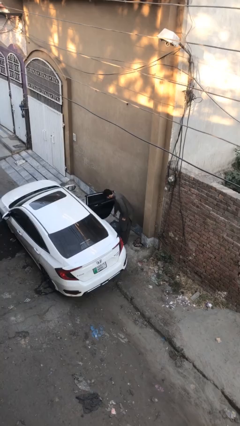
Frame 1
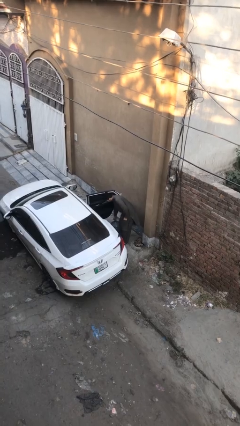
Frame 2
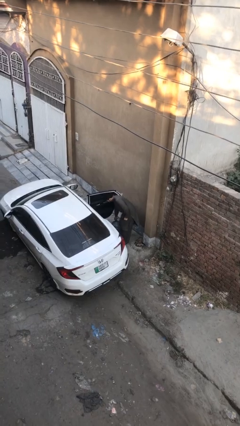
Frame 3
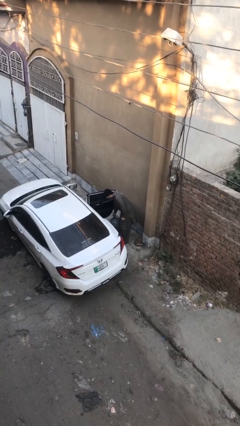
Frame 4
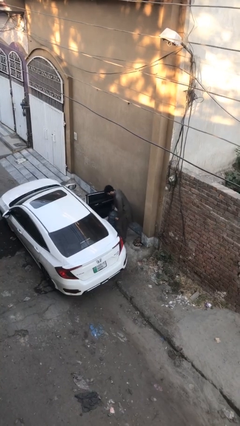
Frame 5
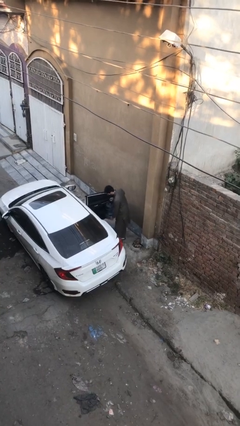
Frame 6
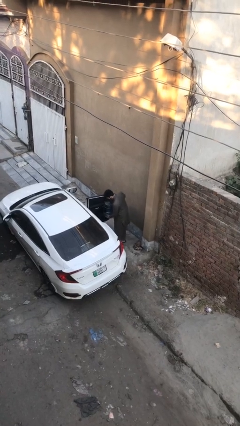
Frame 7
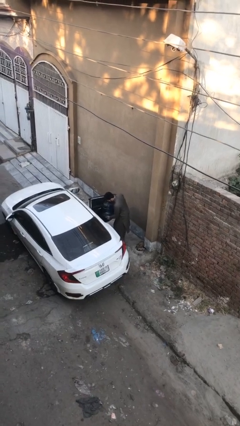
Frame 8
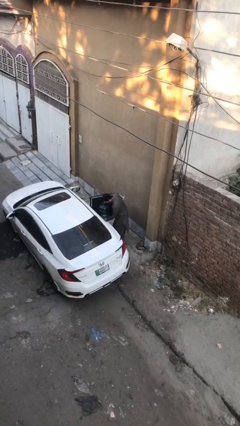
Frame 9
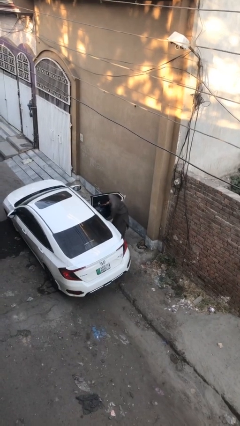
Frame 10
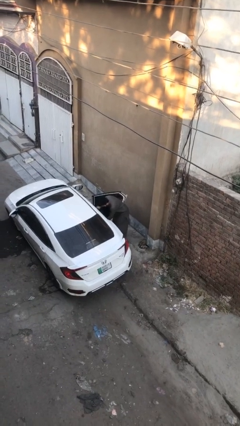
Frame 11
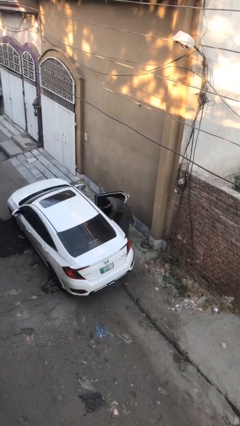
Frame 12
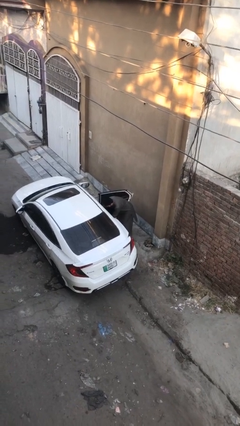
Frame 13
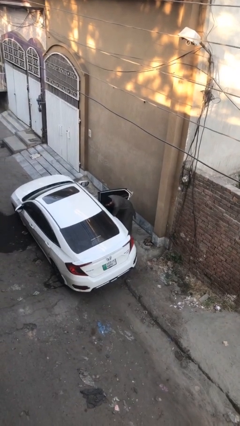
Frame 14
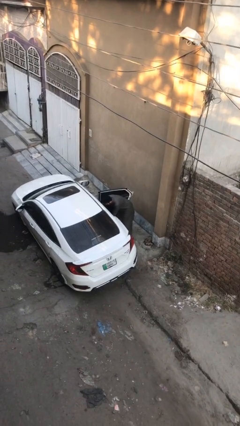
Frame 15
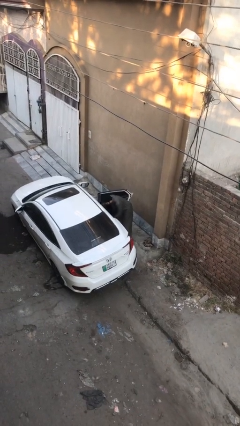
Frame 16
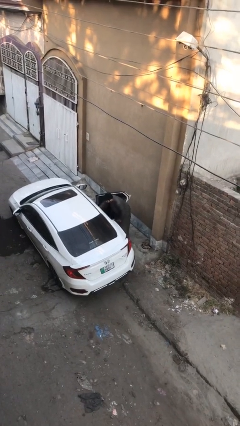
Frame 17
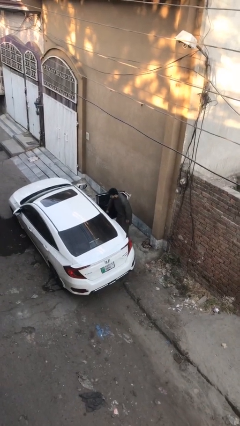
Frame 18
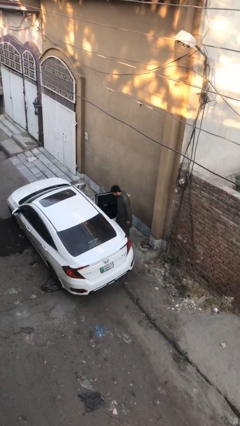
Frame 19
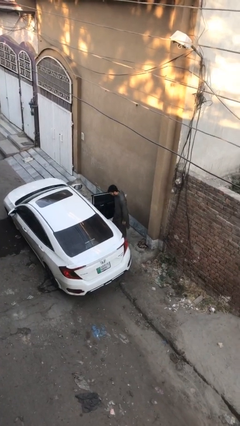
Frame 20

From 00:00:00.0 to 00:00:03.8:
person loads car

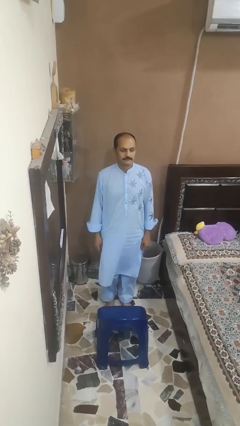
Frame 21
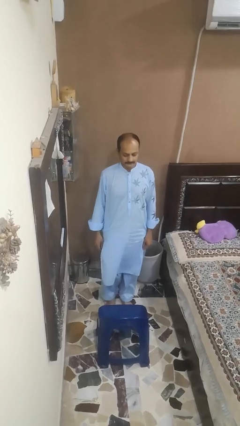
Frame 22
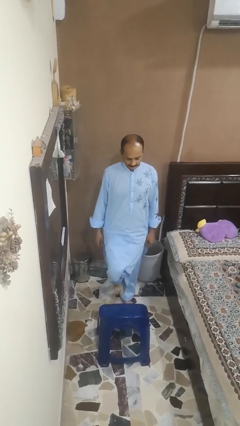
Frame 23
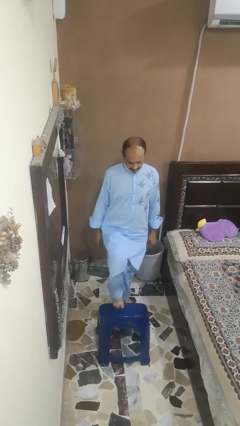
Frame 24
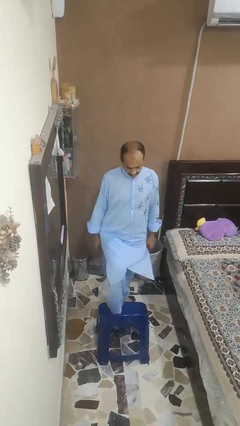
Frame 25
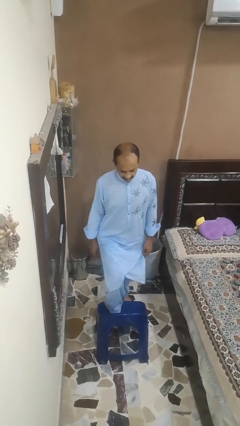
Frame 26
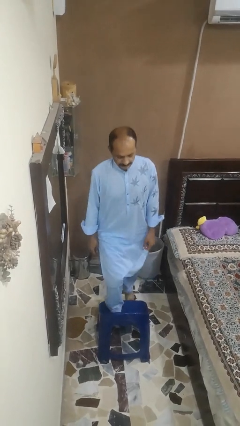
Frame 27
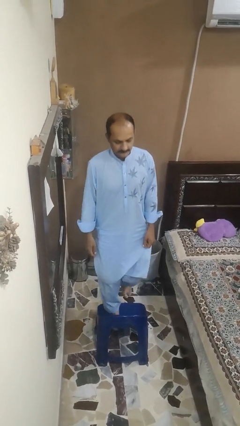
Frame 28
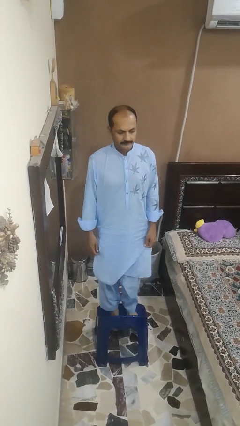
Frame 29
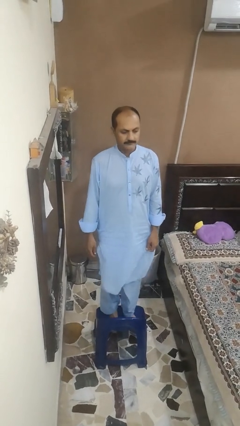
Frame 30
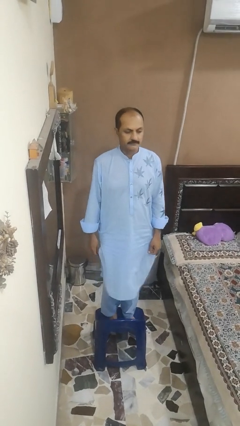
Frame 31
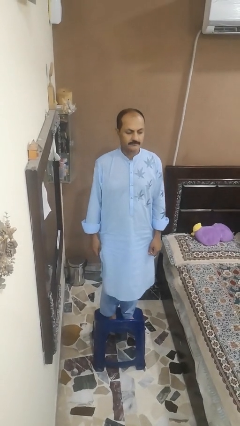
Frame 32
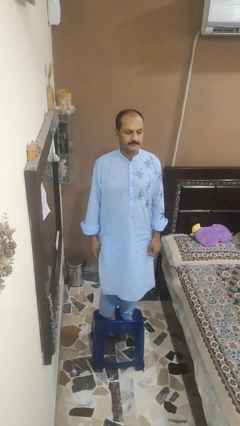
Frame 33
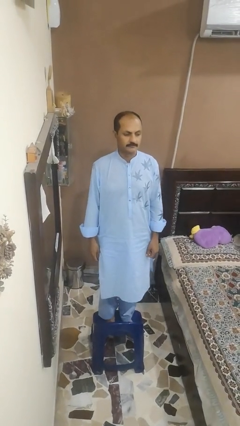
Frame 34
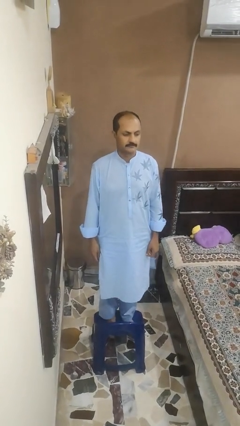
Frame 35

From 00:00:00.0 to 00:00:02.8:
person climbs on chair

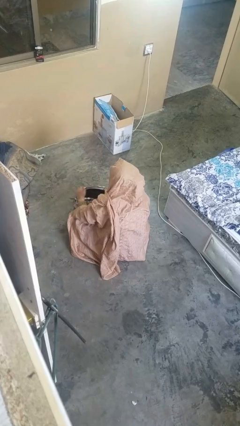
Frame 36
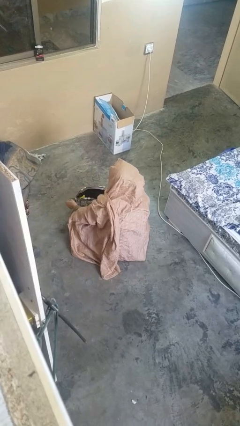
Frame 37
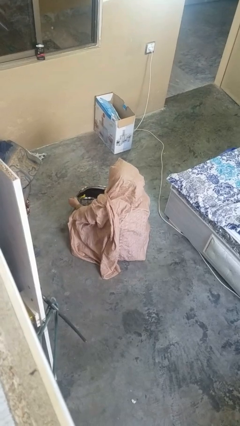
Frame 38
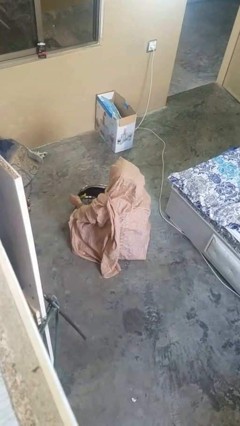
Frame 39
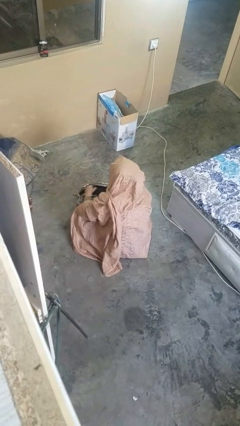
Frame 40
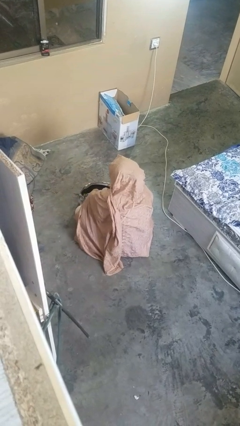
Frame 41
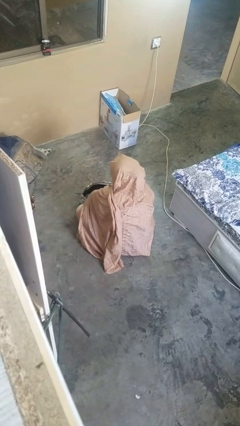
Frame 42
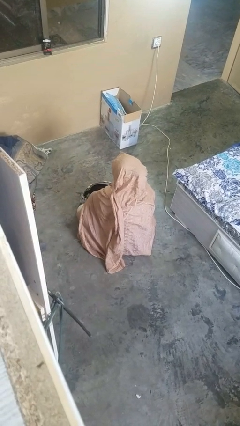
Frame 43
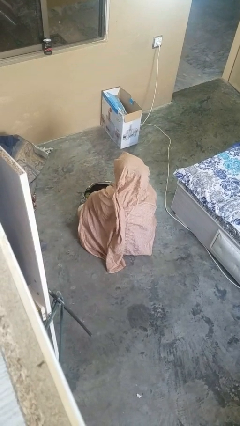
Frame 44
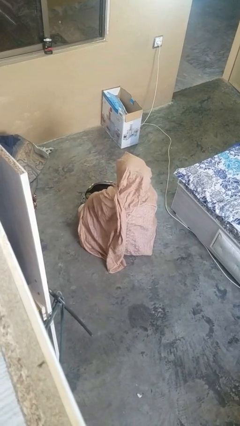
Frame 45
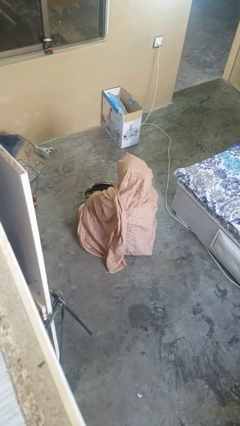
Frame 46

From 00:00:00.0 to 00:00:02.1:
person searches in purse

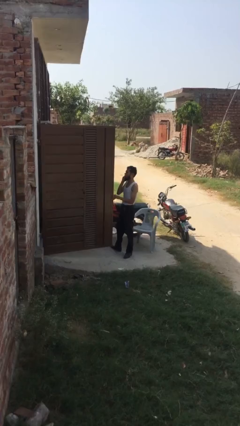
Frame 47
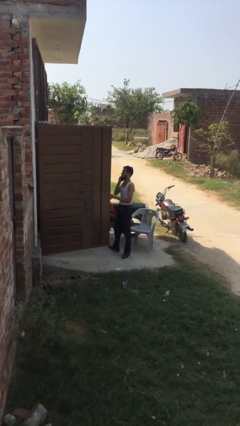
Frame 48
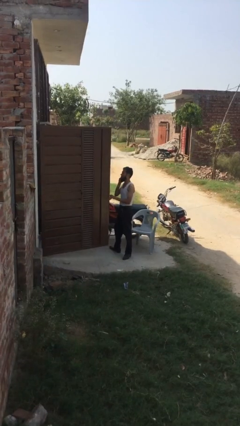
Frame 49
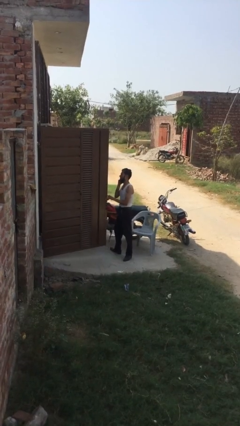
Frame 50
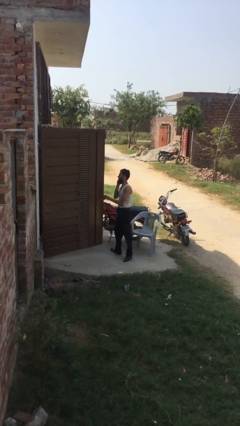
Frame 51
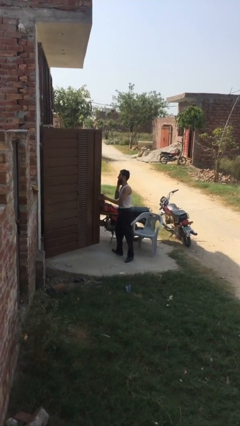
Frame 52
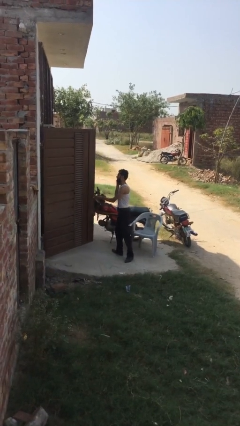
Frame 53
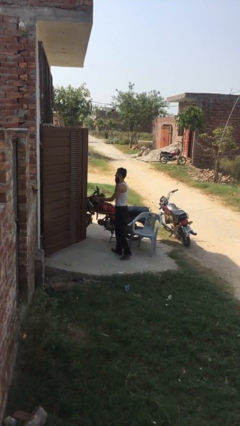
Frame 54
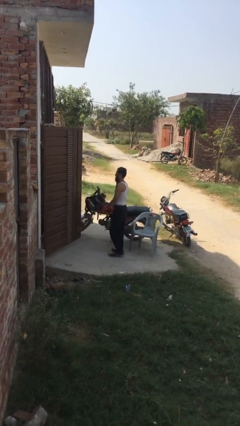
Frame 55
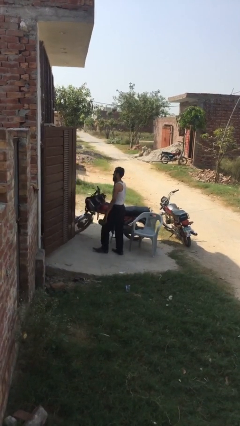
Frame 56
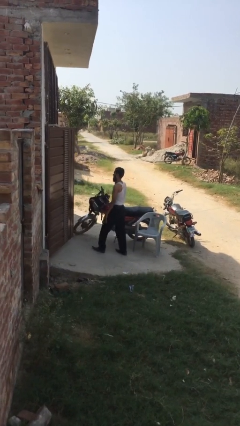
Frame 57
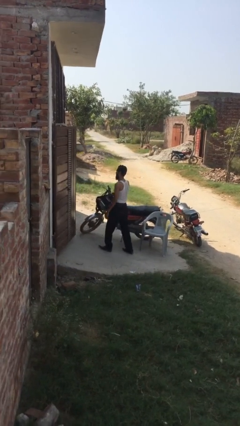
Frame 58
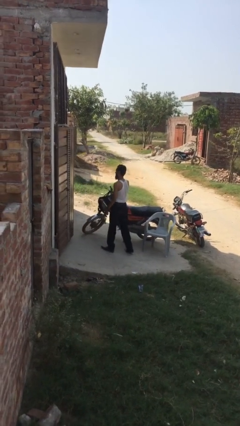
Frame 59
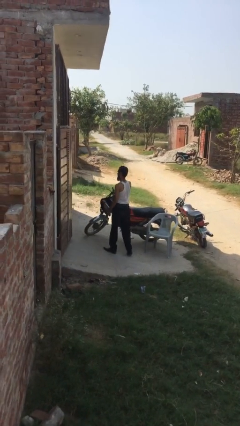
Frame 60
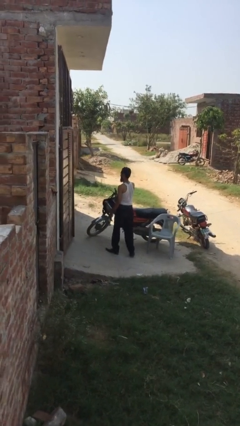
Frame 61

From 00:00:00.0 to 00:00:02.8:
person closes facility door

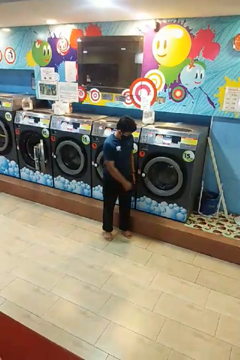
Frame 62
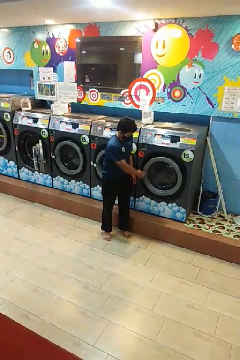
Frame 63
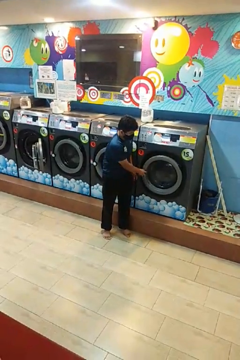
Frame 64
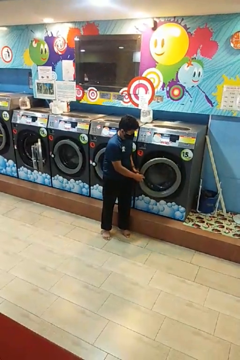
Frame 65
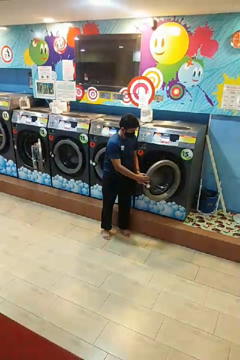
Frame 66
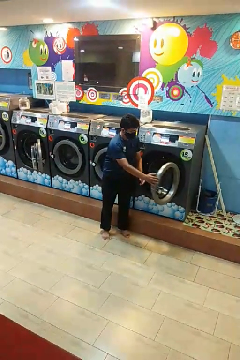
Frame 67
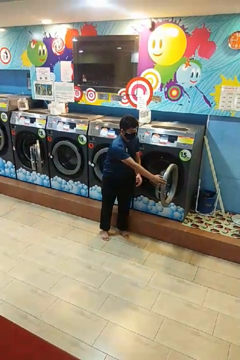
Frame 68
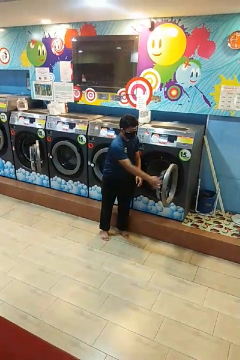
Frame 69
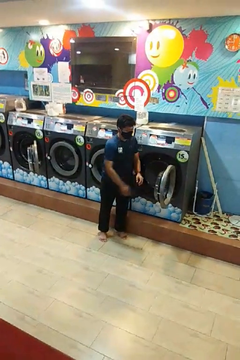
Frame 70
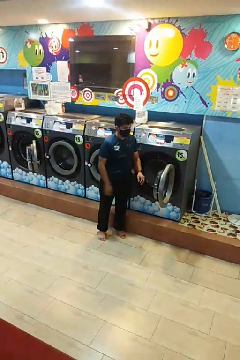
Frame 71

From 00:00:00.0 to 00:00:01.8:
person opens clothes washer

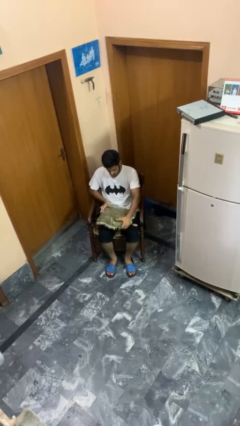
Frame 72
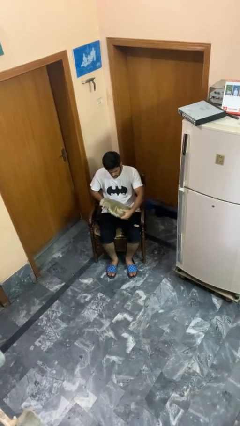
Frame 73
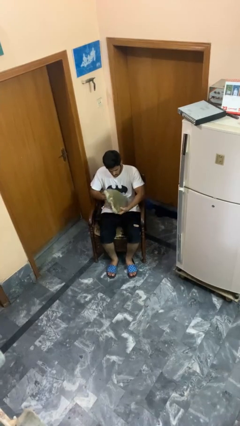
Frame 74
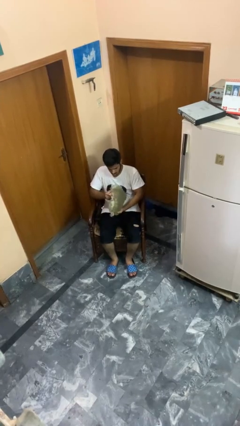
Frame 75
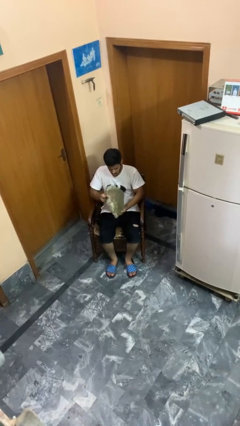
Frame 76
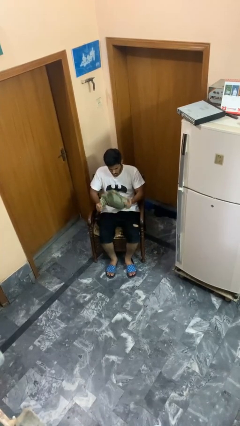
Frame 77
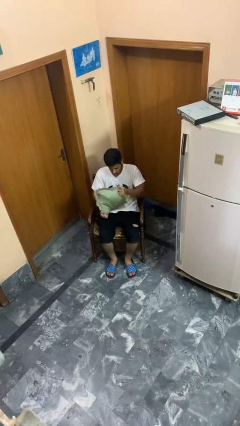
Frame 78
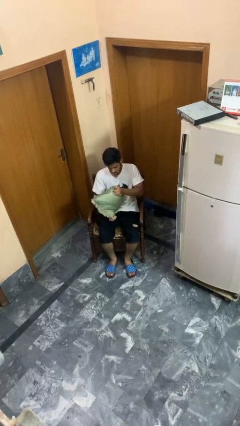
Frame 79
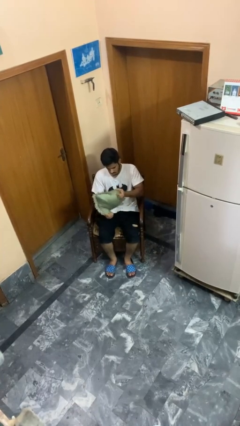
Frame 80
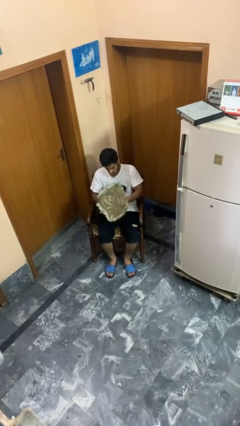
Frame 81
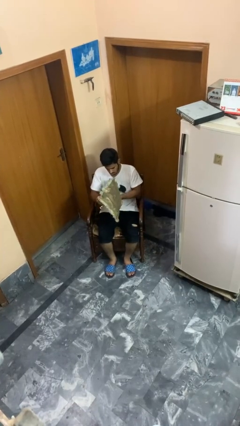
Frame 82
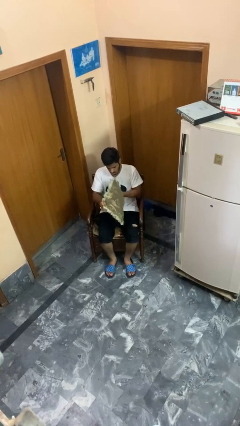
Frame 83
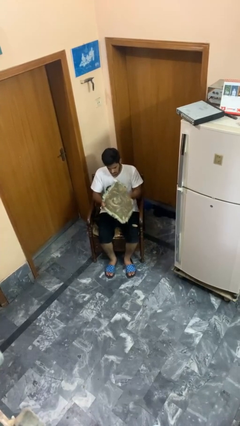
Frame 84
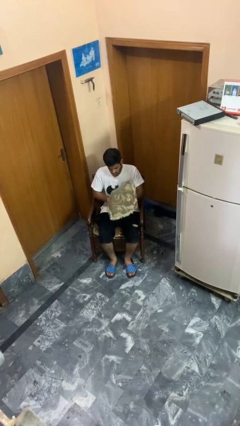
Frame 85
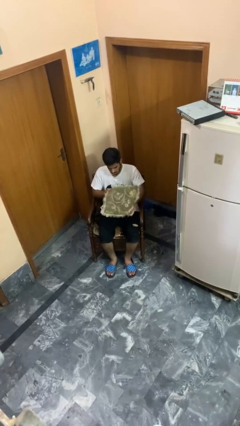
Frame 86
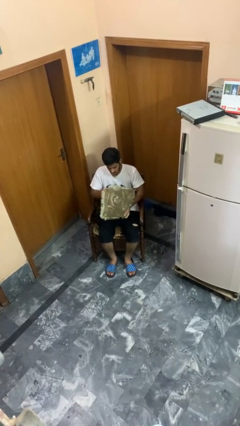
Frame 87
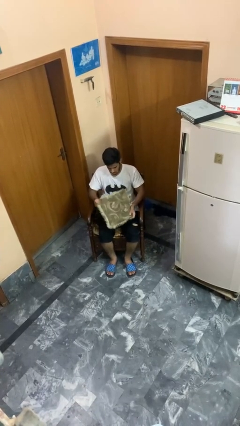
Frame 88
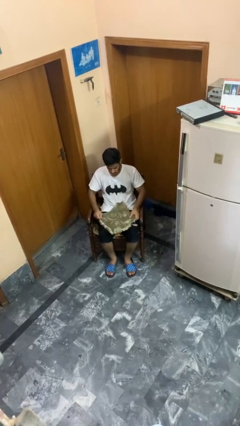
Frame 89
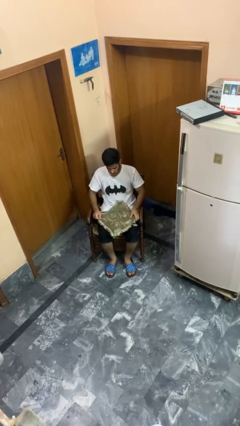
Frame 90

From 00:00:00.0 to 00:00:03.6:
person squeezes object

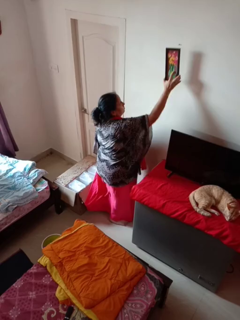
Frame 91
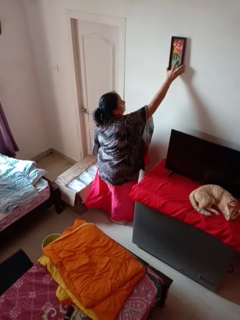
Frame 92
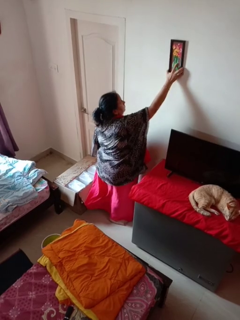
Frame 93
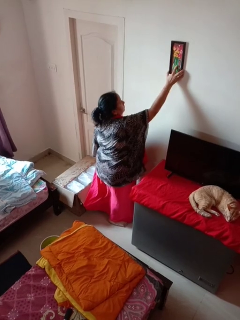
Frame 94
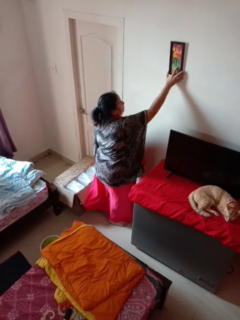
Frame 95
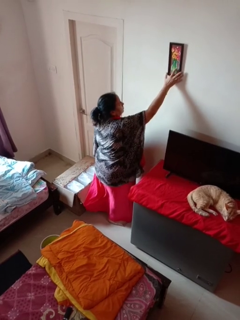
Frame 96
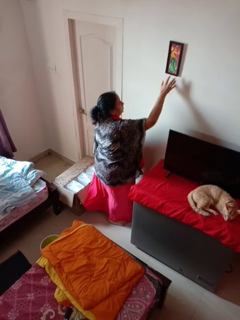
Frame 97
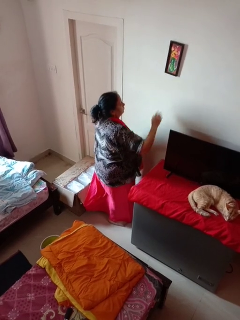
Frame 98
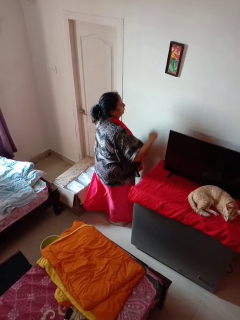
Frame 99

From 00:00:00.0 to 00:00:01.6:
person puts up picture frame
